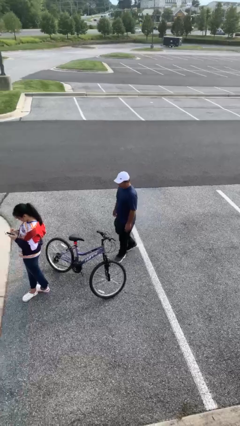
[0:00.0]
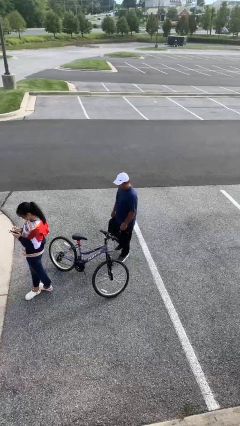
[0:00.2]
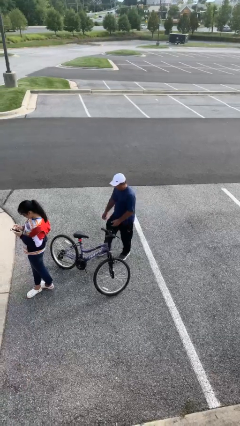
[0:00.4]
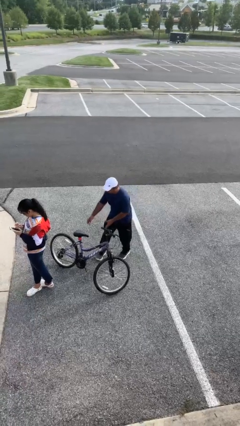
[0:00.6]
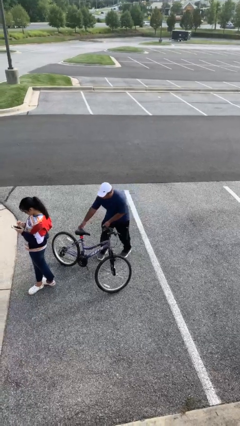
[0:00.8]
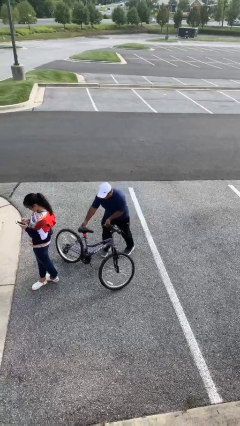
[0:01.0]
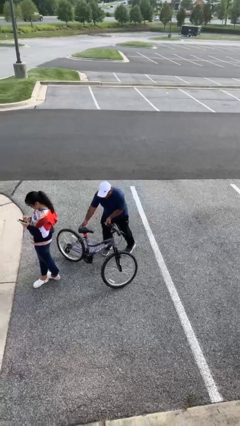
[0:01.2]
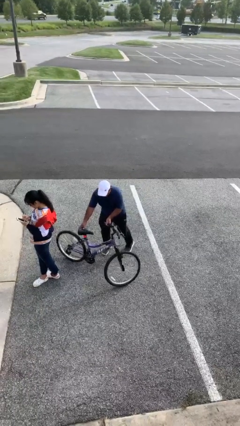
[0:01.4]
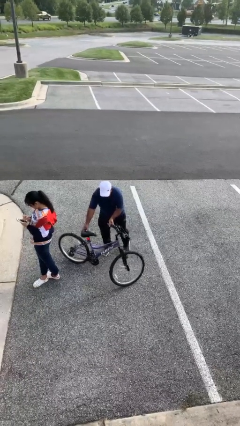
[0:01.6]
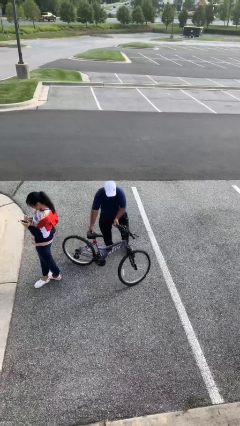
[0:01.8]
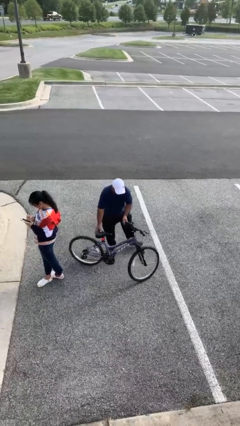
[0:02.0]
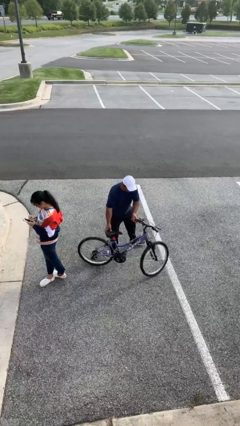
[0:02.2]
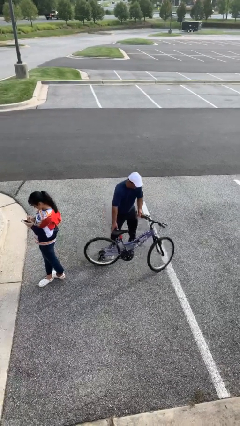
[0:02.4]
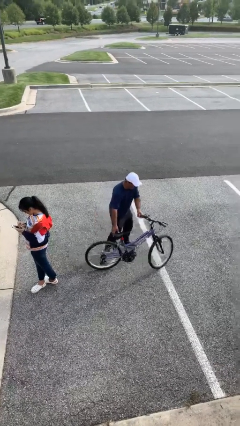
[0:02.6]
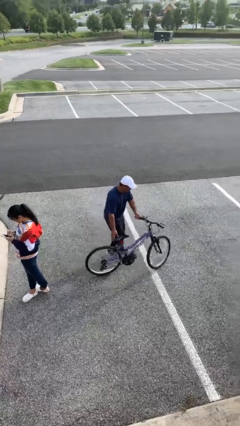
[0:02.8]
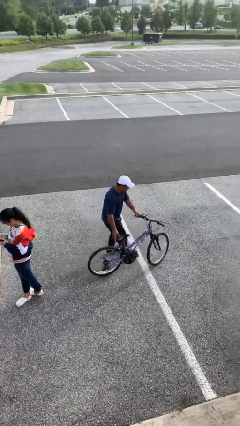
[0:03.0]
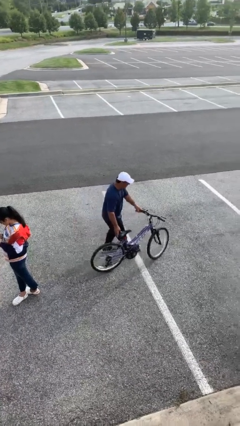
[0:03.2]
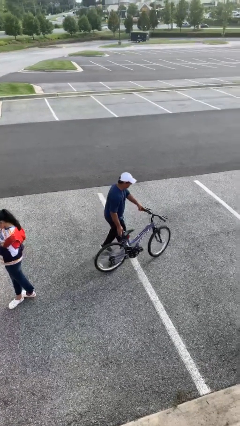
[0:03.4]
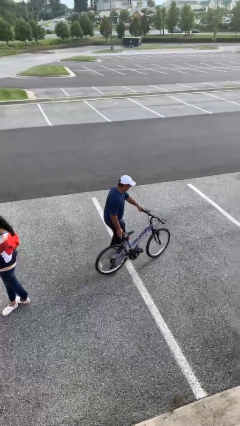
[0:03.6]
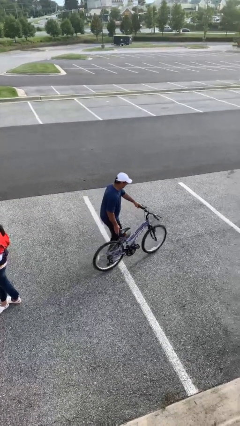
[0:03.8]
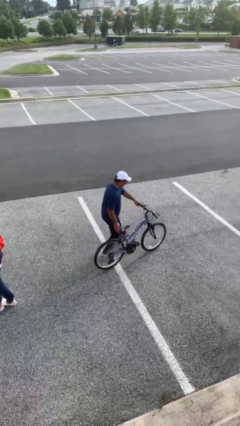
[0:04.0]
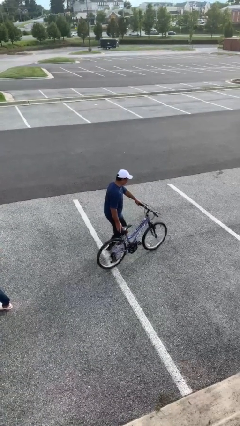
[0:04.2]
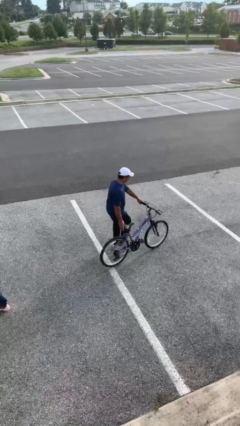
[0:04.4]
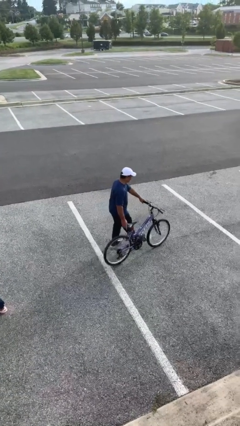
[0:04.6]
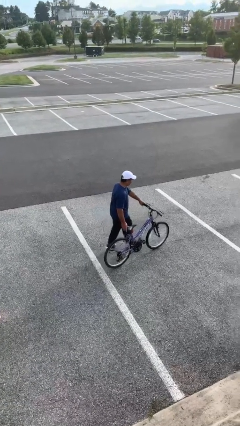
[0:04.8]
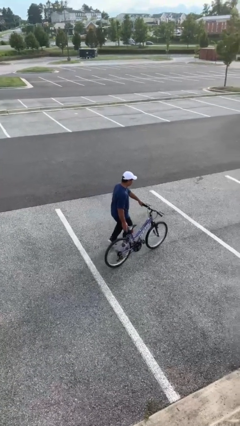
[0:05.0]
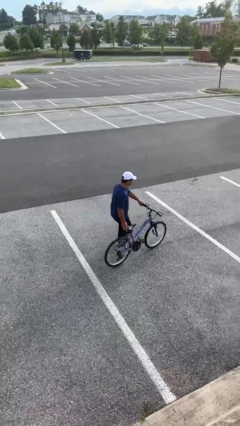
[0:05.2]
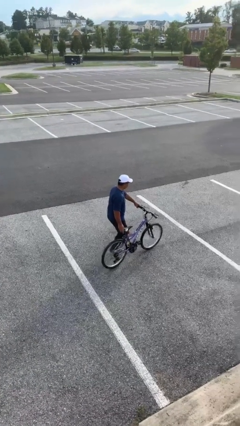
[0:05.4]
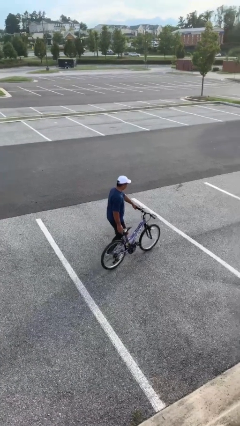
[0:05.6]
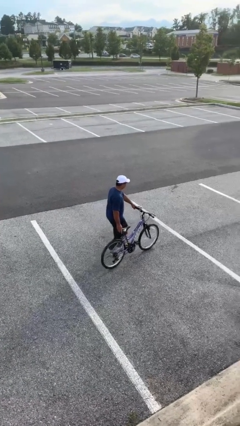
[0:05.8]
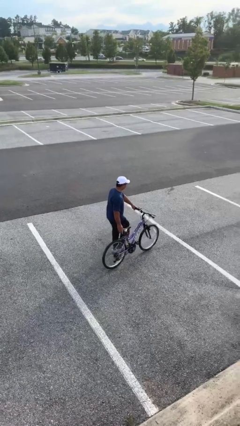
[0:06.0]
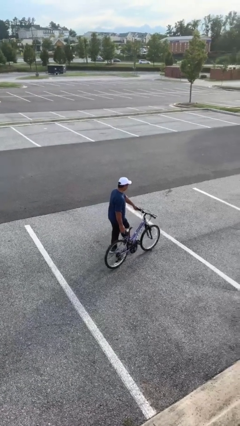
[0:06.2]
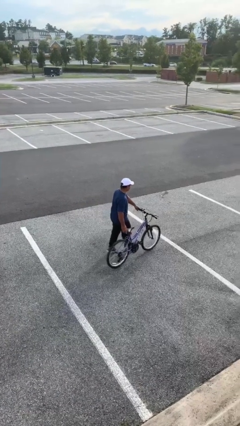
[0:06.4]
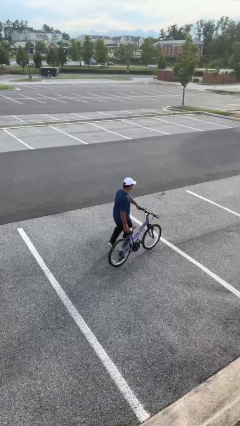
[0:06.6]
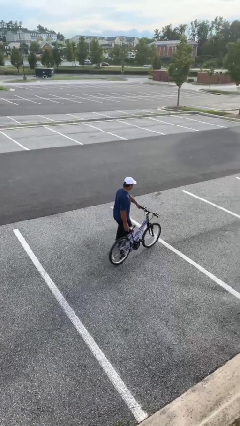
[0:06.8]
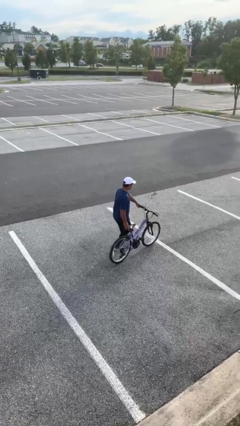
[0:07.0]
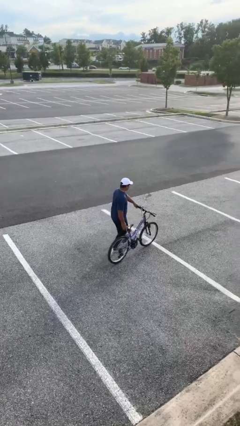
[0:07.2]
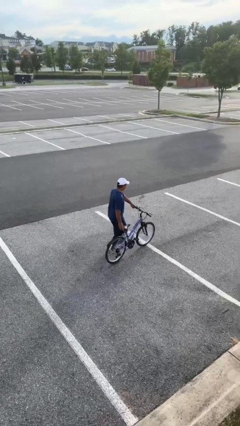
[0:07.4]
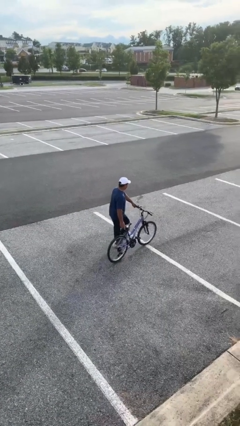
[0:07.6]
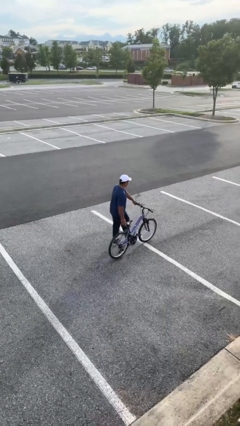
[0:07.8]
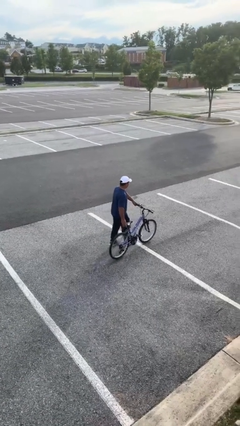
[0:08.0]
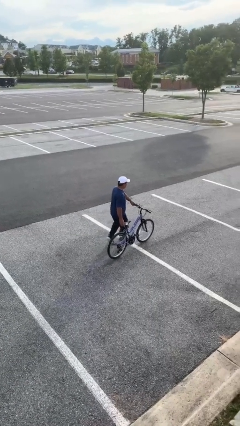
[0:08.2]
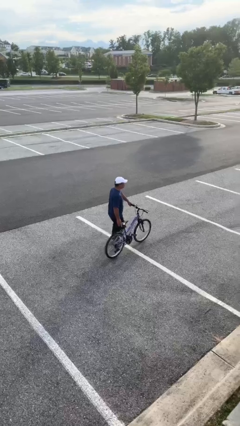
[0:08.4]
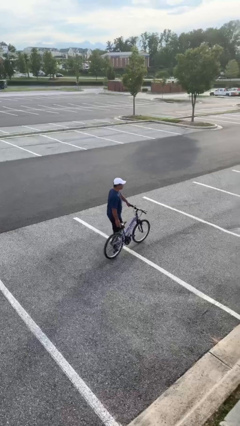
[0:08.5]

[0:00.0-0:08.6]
person steals object from person

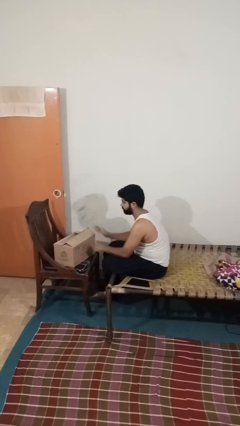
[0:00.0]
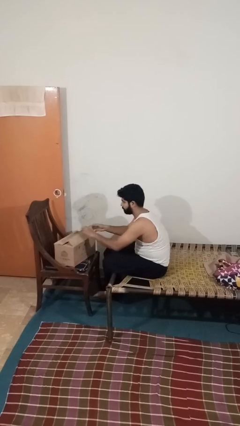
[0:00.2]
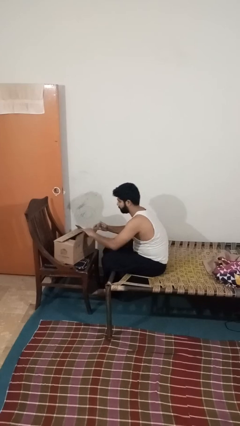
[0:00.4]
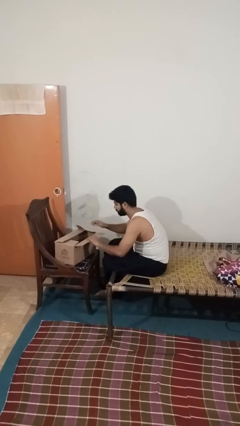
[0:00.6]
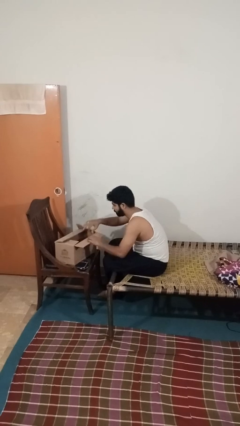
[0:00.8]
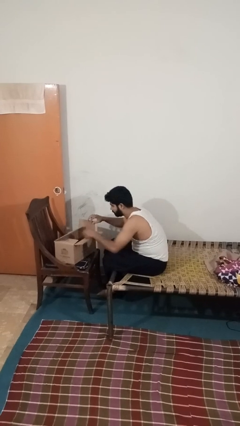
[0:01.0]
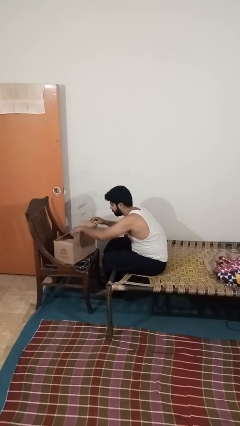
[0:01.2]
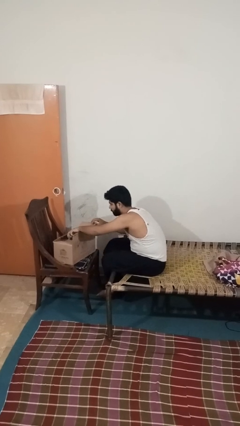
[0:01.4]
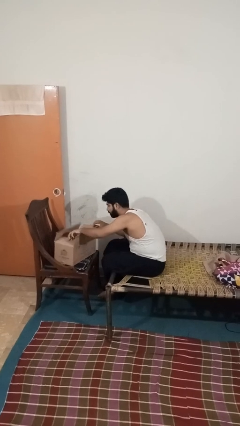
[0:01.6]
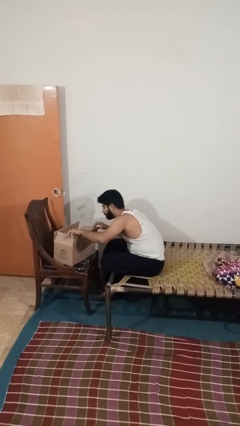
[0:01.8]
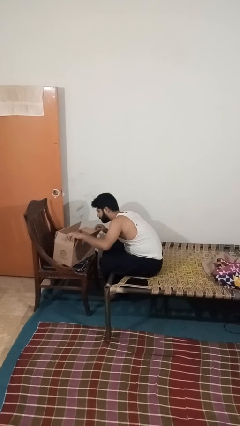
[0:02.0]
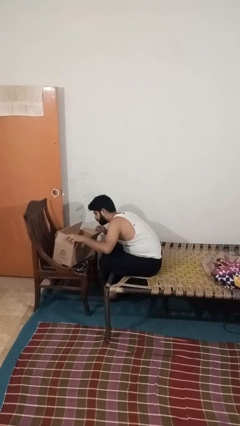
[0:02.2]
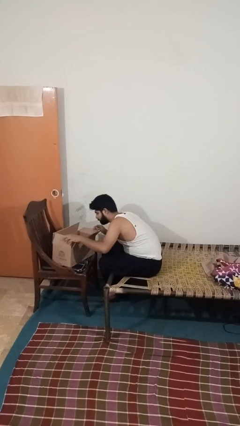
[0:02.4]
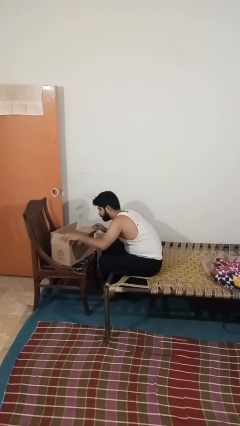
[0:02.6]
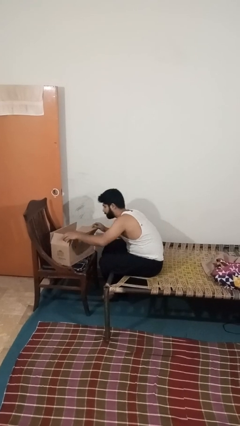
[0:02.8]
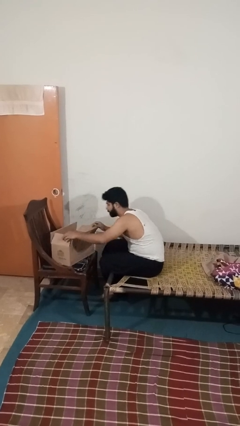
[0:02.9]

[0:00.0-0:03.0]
person opens box

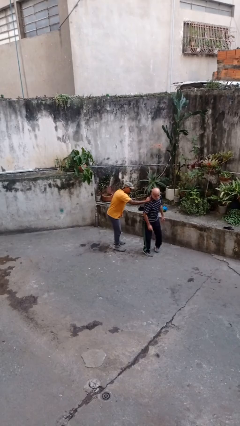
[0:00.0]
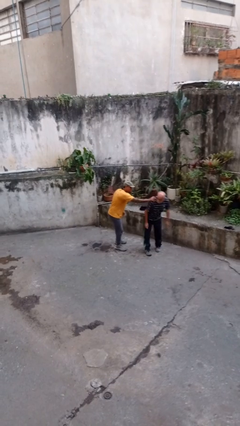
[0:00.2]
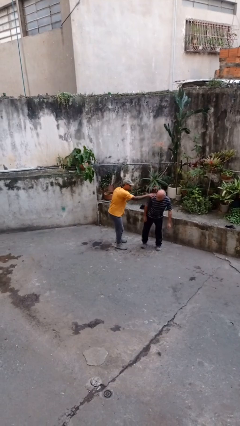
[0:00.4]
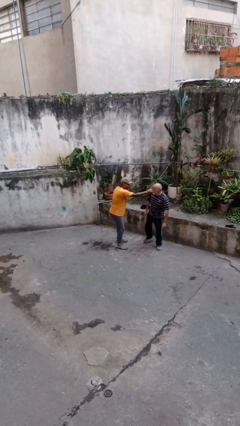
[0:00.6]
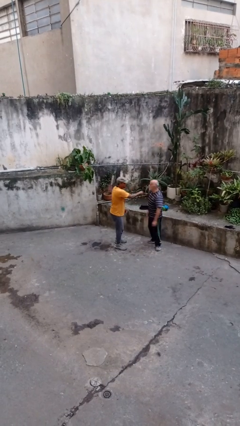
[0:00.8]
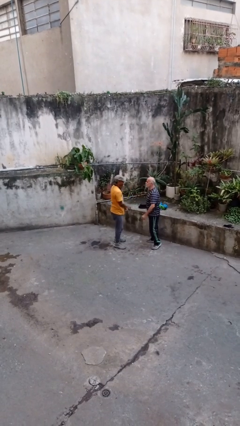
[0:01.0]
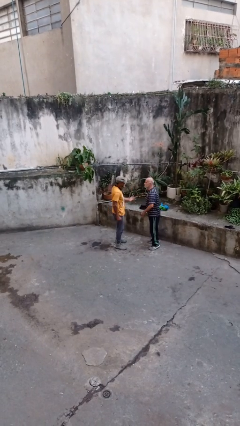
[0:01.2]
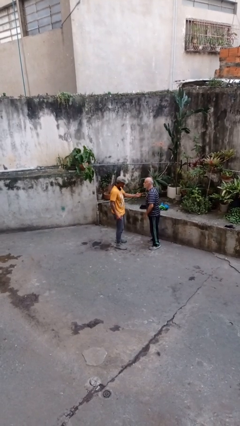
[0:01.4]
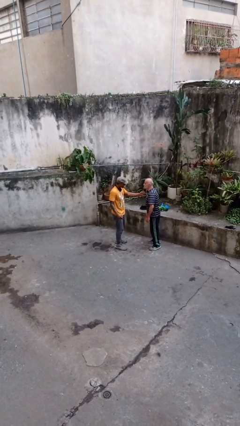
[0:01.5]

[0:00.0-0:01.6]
person spins person around

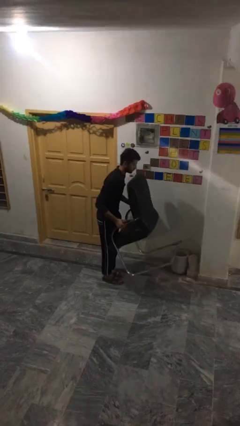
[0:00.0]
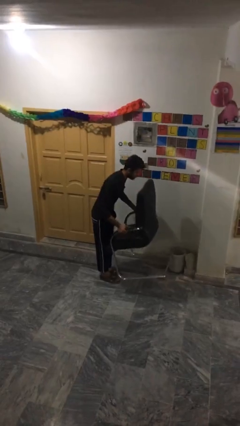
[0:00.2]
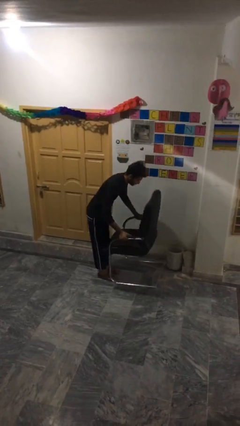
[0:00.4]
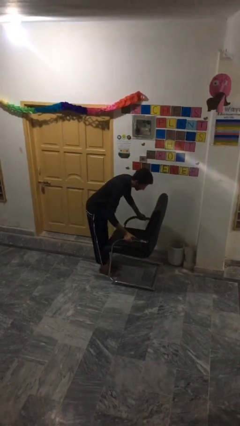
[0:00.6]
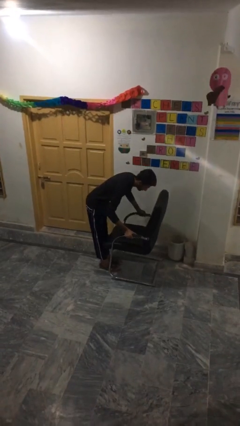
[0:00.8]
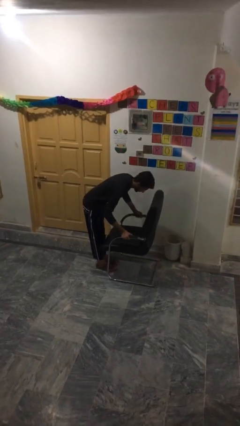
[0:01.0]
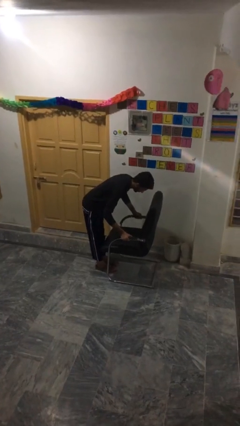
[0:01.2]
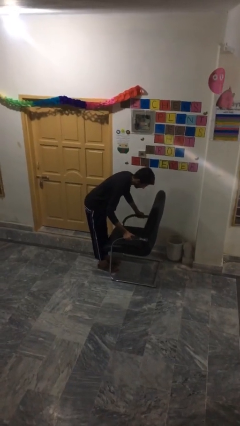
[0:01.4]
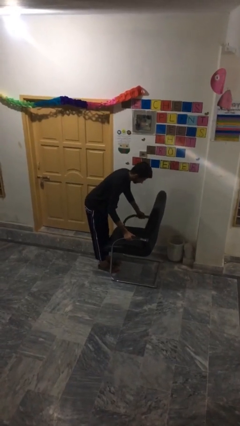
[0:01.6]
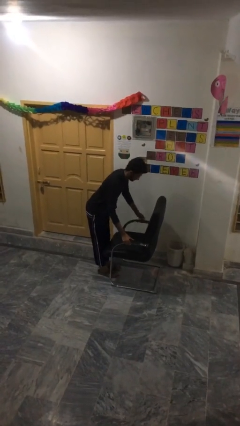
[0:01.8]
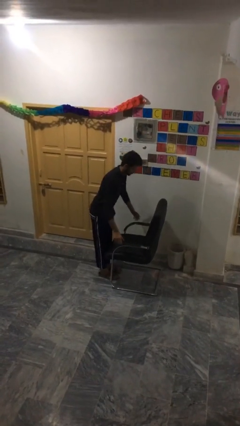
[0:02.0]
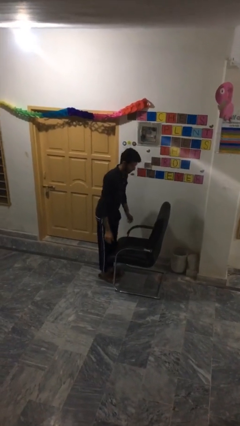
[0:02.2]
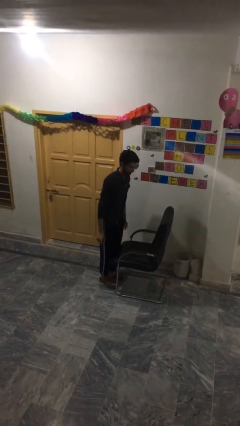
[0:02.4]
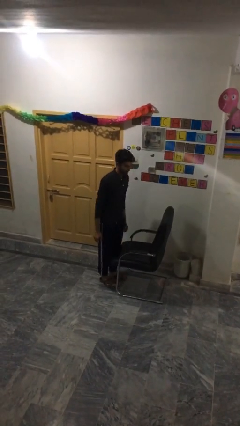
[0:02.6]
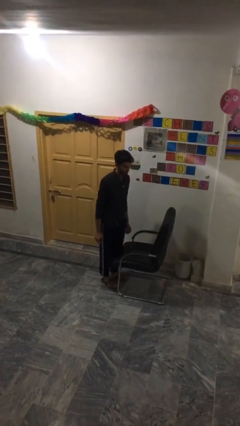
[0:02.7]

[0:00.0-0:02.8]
person puts down object on floor

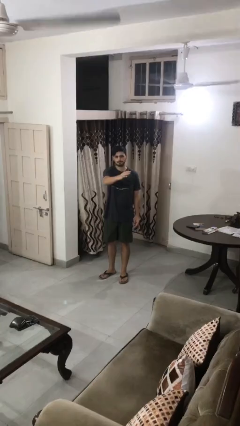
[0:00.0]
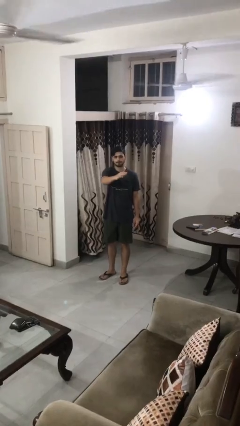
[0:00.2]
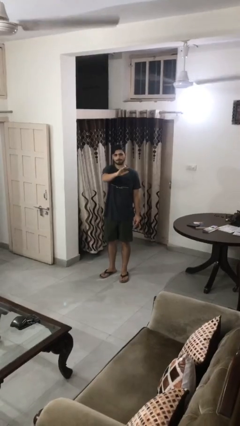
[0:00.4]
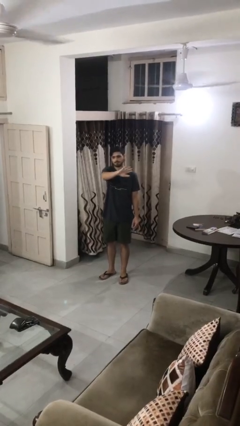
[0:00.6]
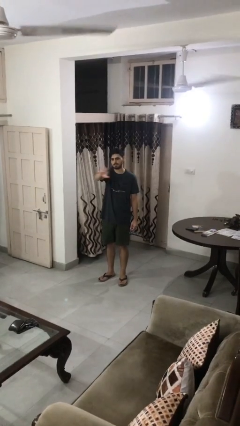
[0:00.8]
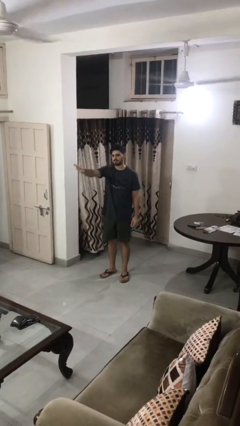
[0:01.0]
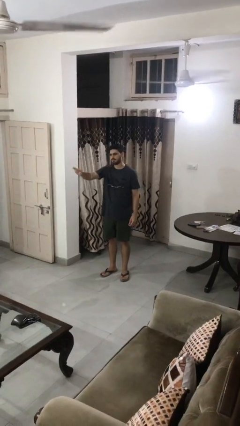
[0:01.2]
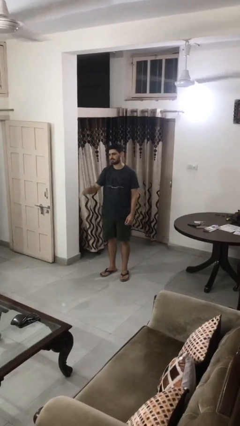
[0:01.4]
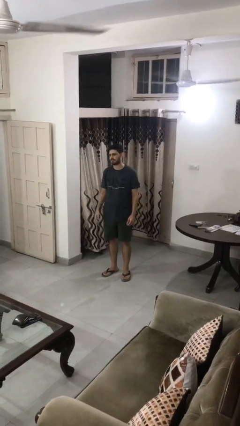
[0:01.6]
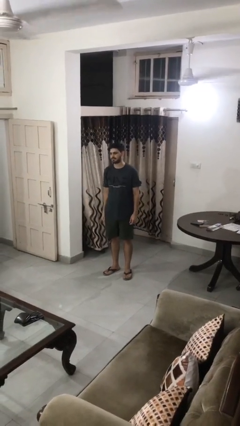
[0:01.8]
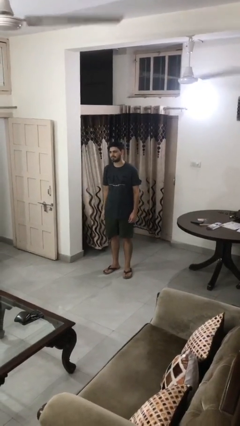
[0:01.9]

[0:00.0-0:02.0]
person gestures swipe right
